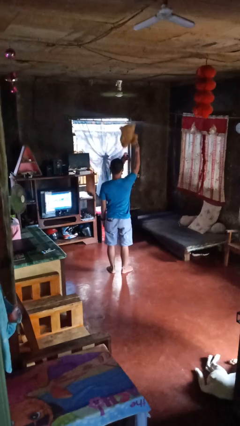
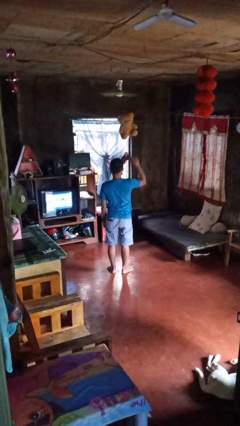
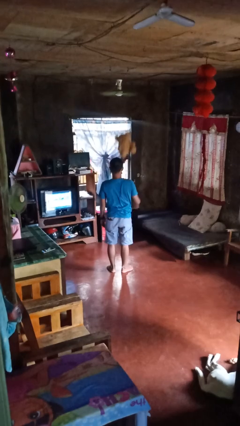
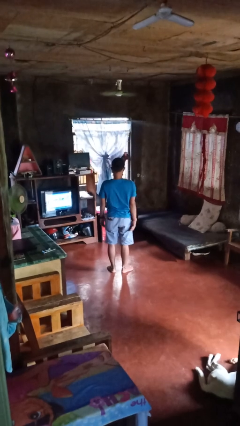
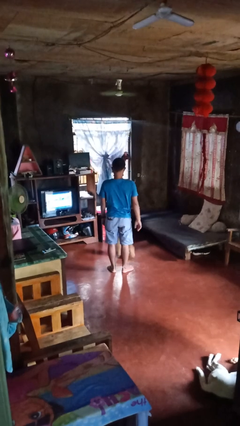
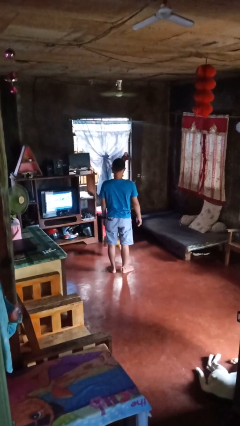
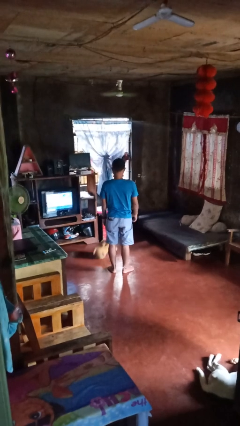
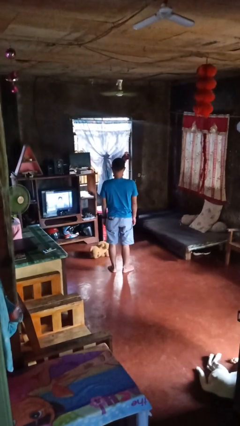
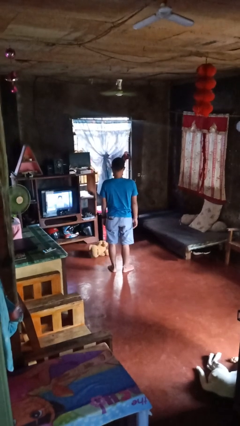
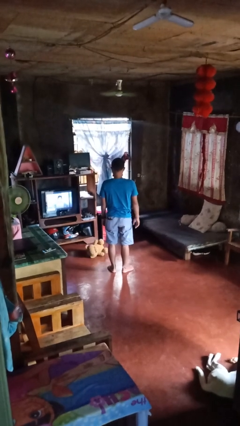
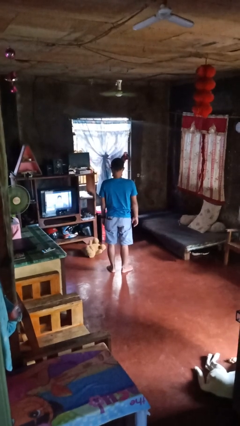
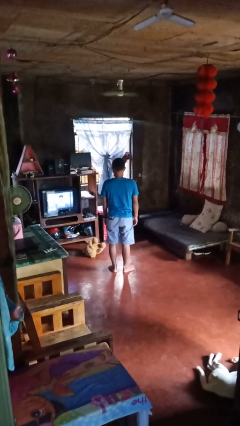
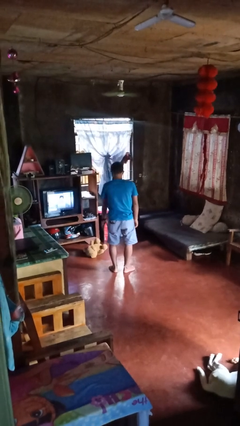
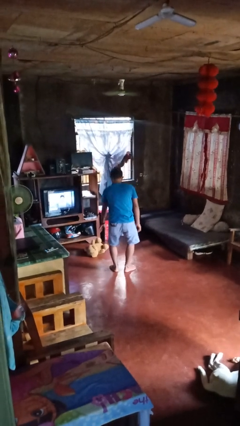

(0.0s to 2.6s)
person throws object into air

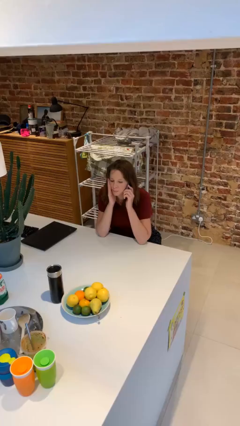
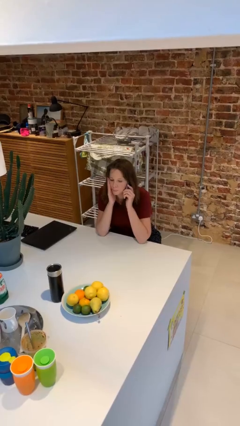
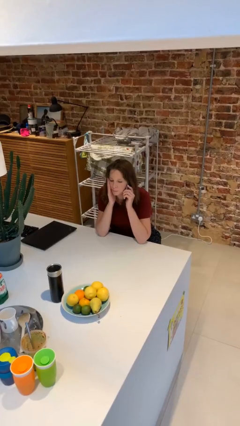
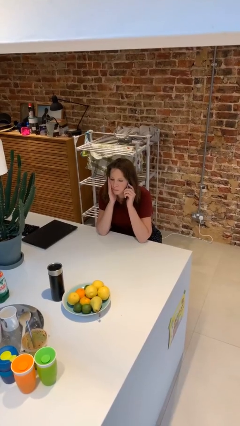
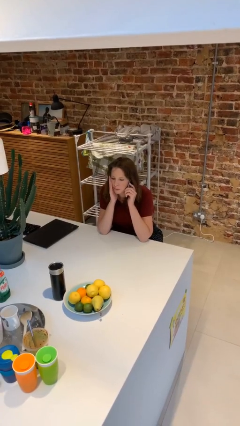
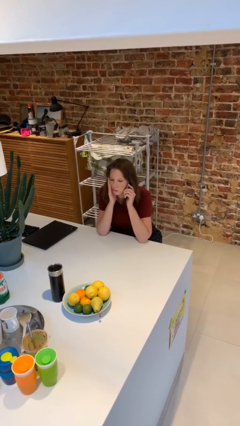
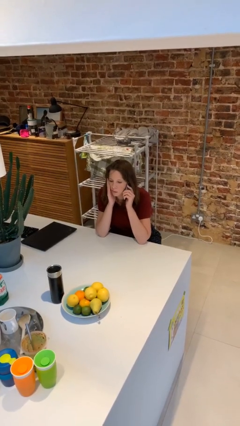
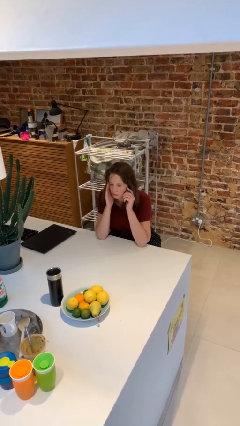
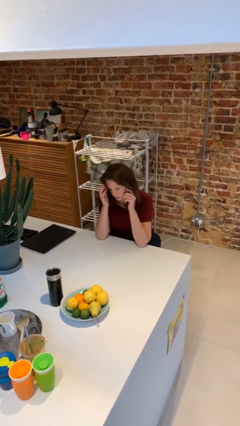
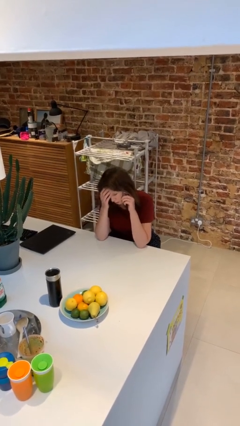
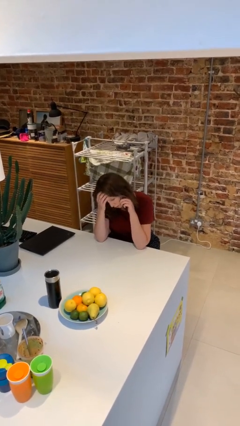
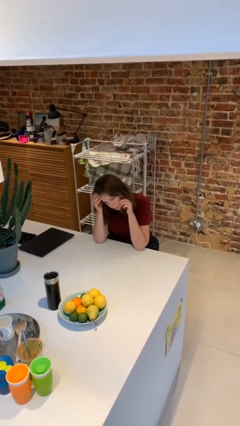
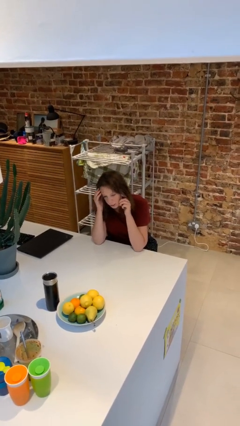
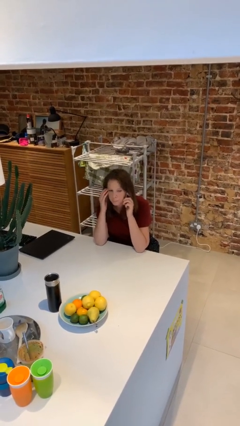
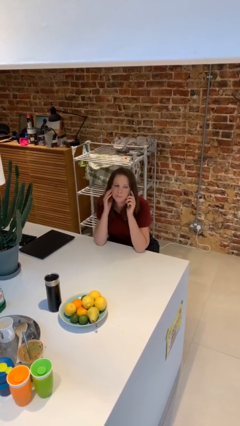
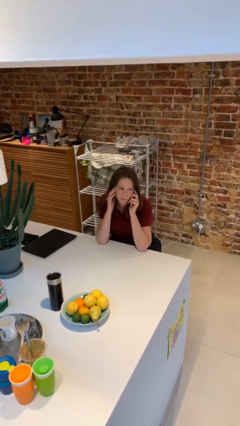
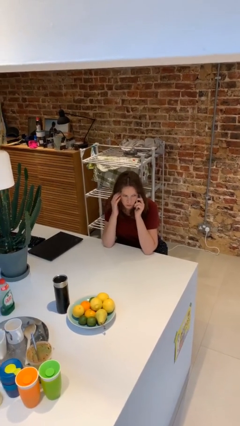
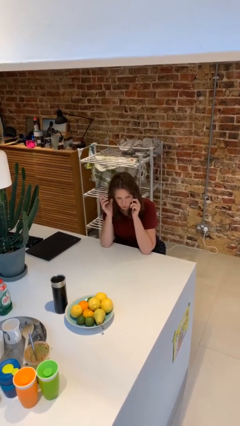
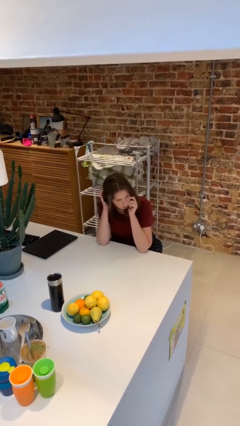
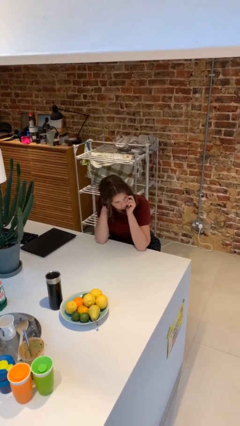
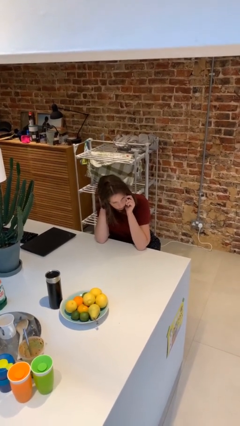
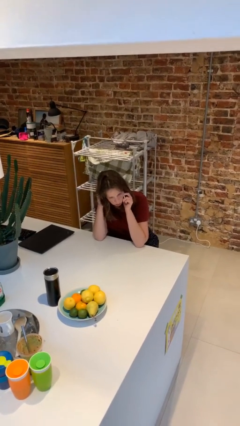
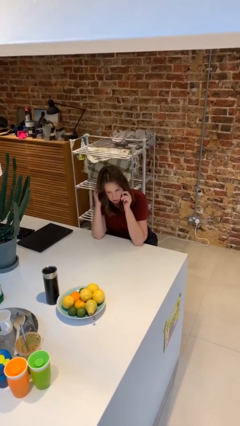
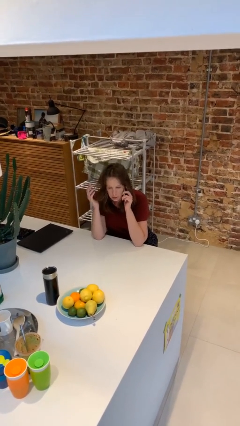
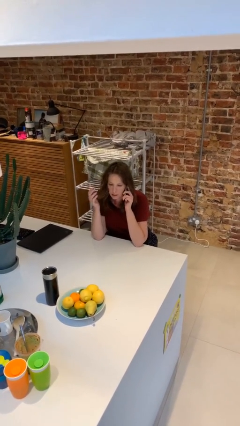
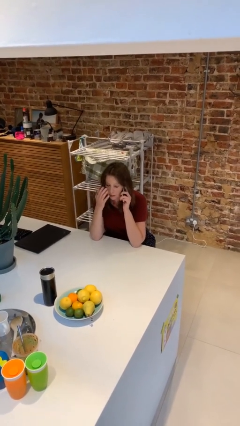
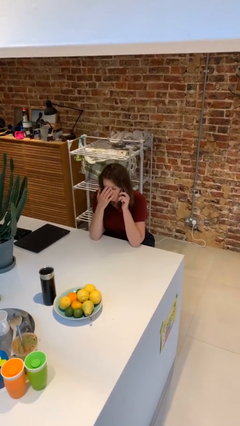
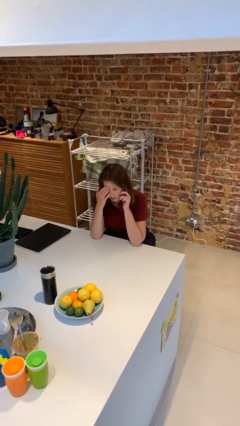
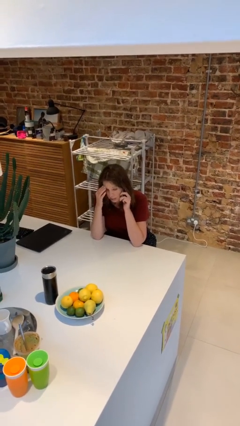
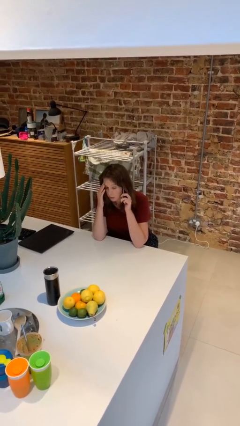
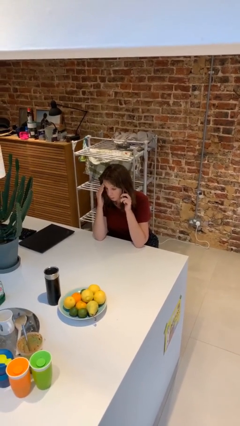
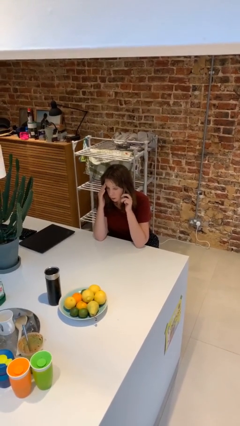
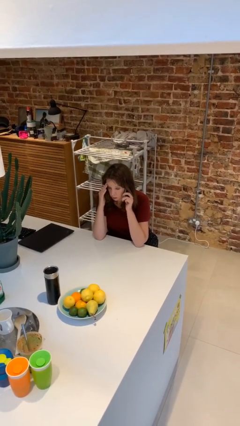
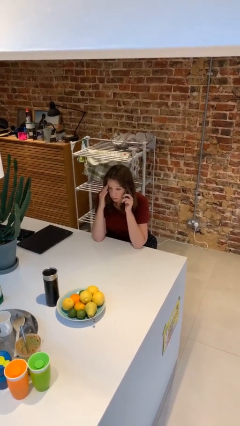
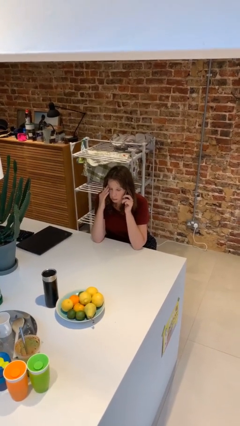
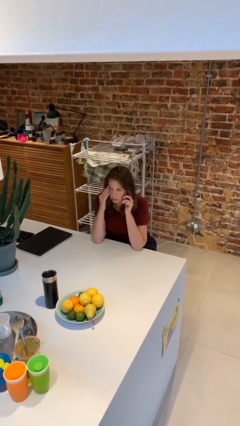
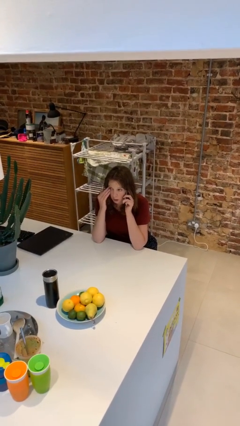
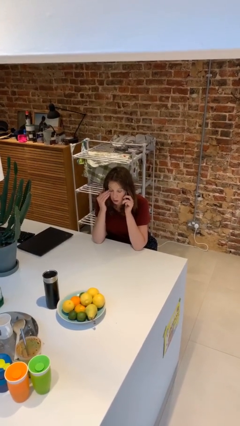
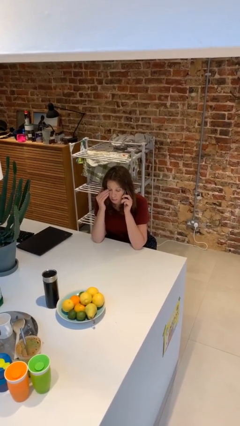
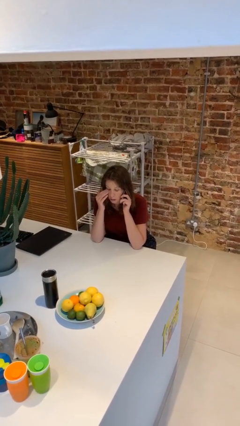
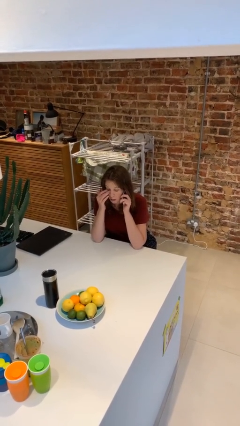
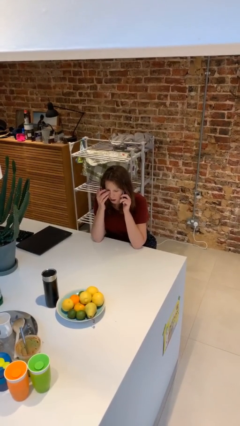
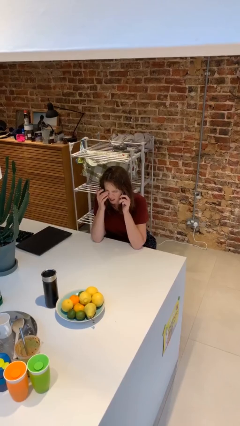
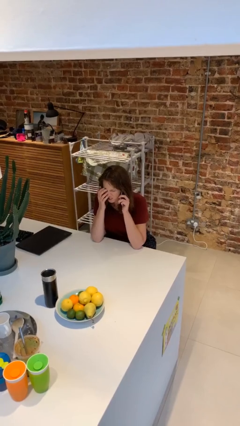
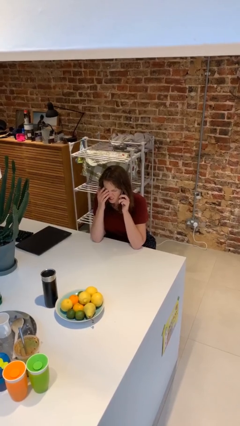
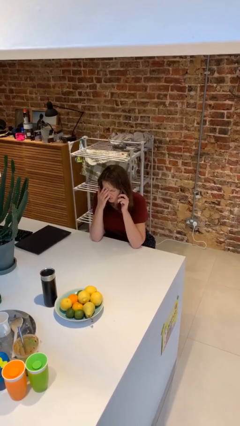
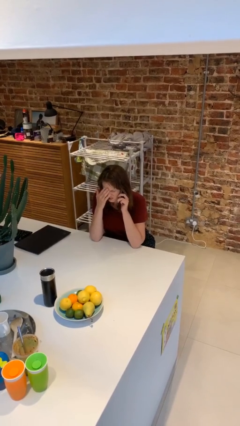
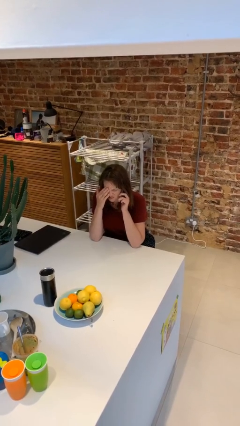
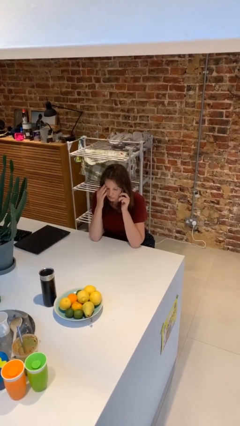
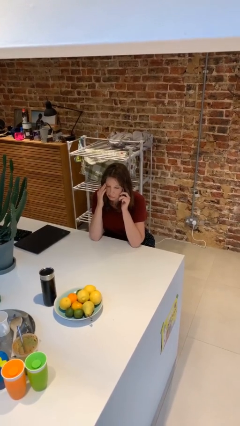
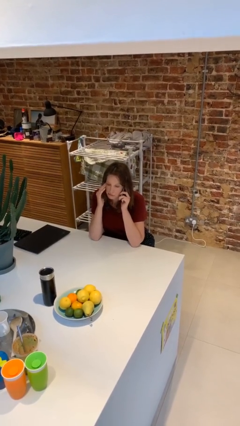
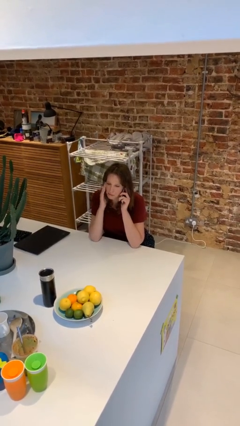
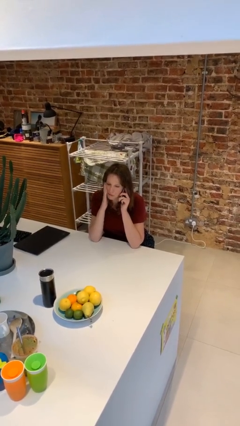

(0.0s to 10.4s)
person talks on phone

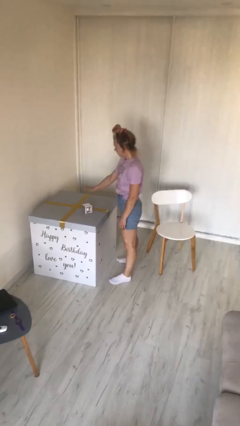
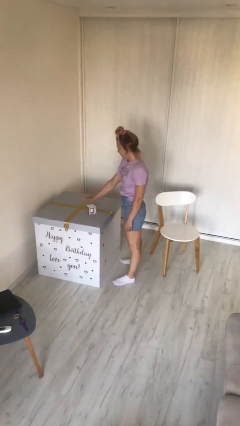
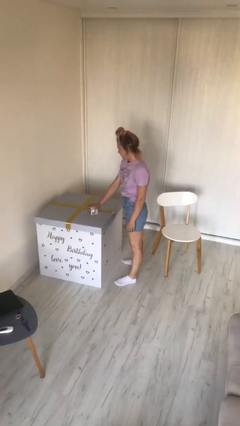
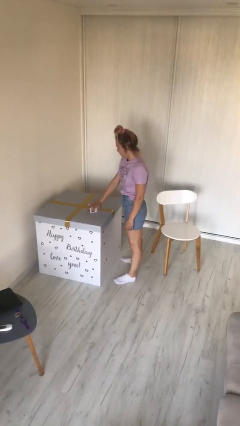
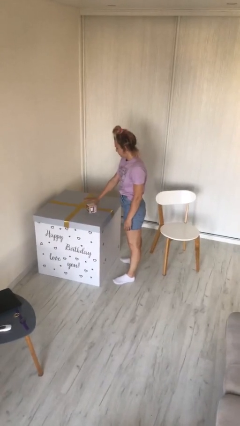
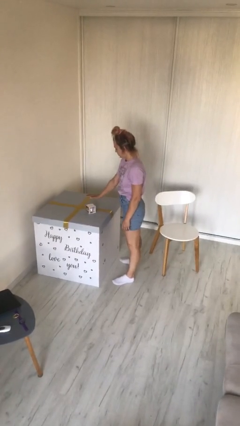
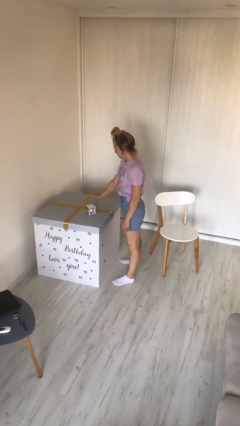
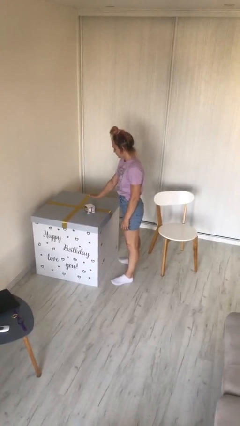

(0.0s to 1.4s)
person waves hand over object

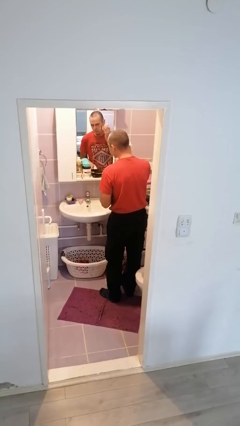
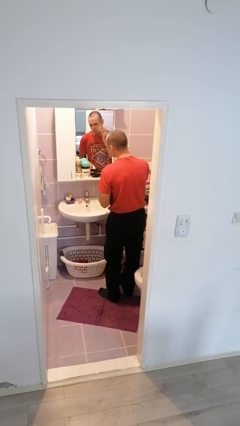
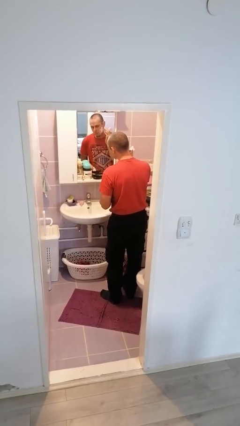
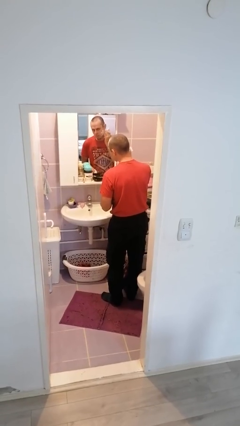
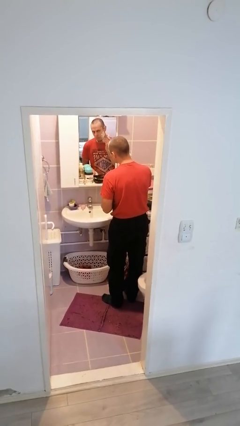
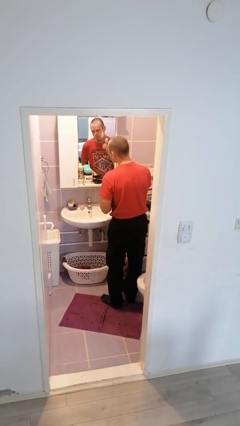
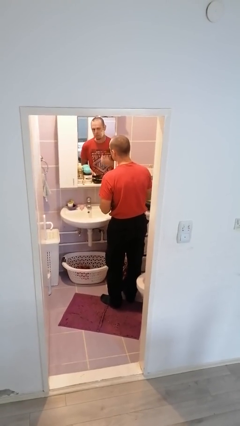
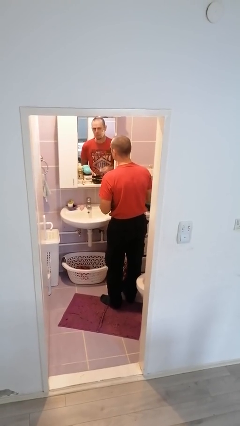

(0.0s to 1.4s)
person applies shaving cream

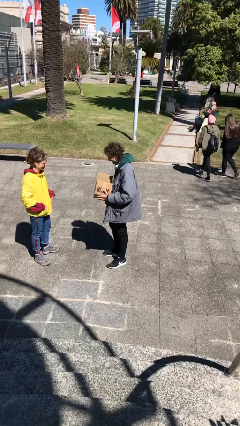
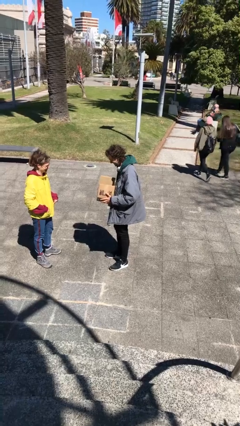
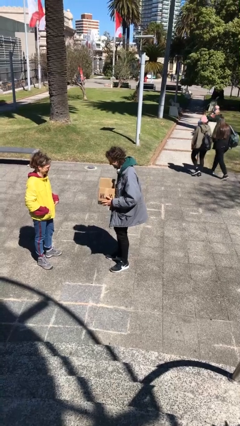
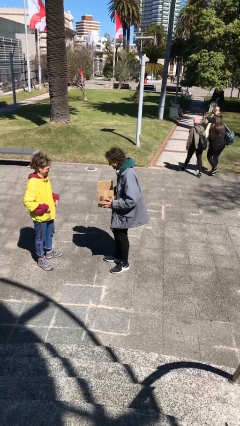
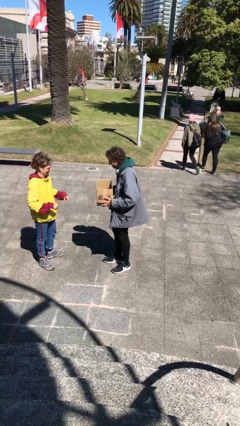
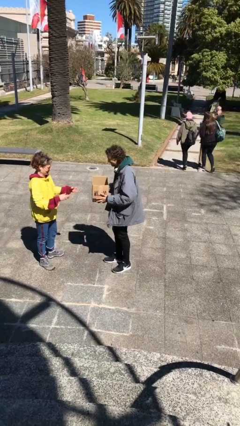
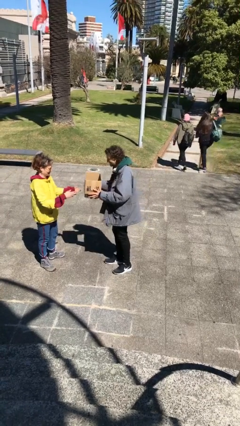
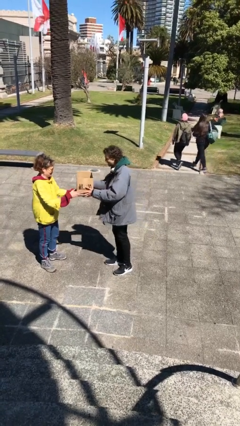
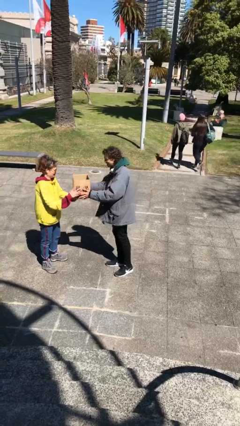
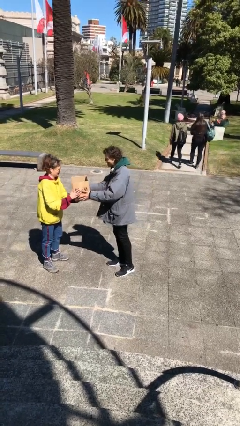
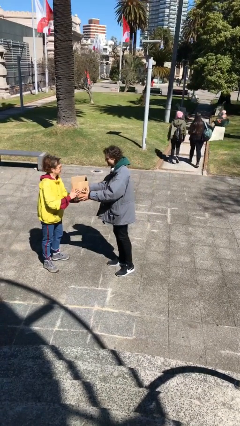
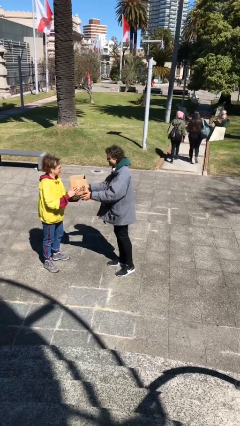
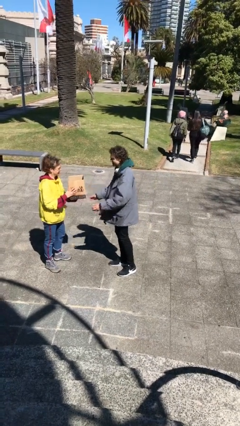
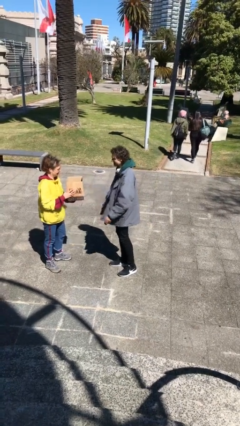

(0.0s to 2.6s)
person transfers object to person
